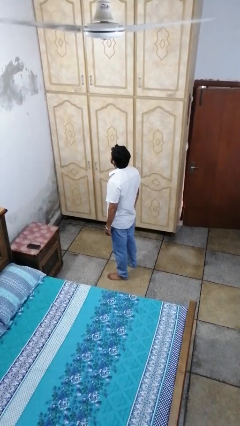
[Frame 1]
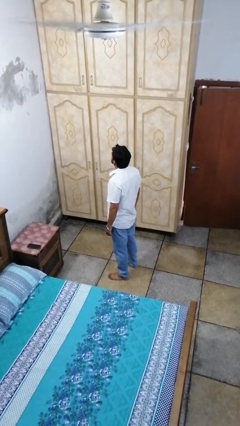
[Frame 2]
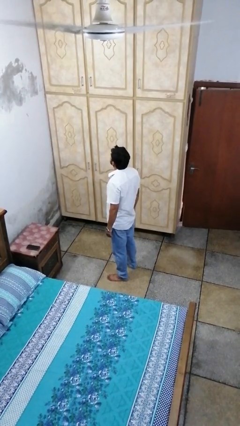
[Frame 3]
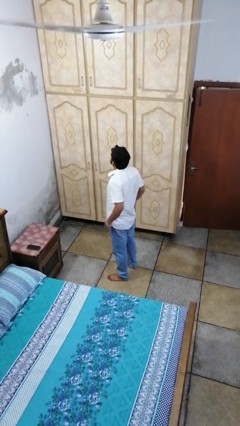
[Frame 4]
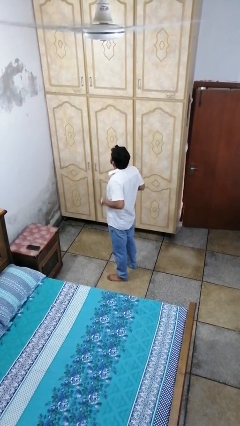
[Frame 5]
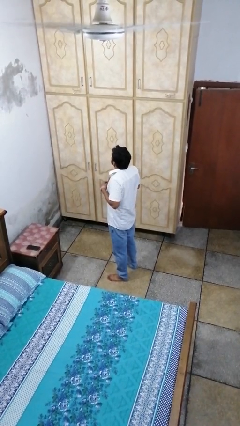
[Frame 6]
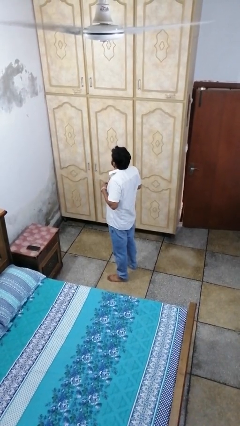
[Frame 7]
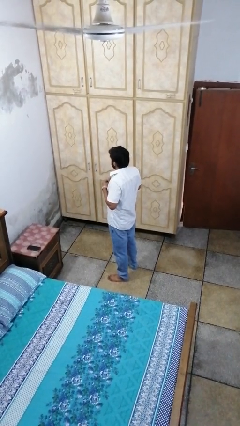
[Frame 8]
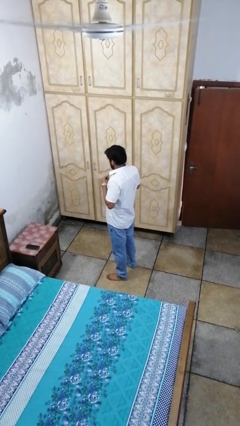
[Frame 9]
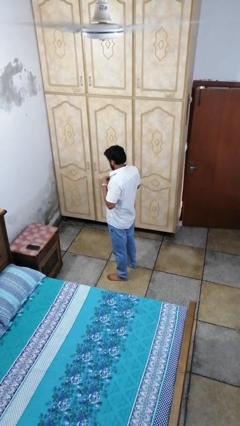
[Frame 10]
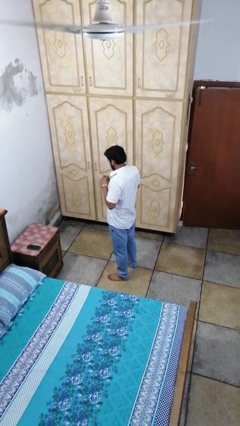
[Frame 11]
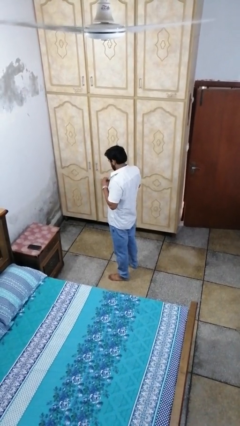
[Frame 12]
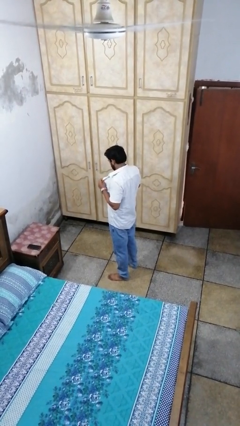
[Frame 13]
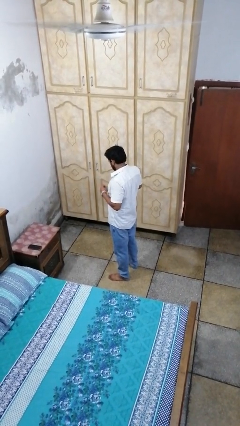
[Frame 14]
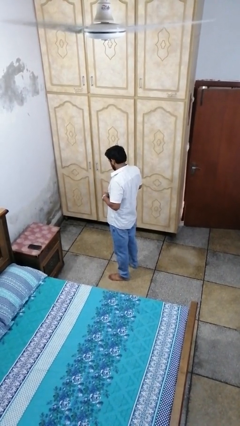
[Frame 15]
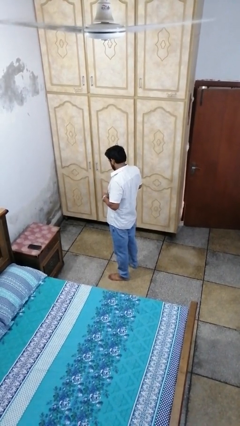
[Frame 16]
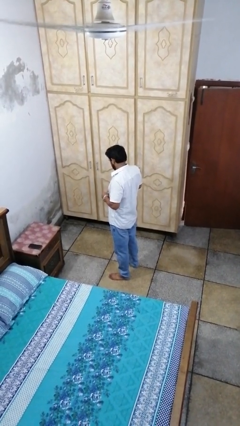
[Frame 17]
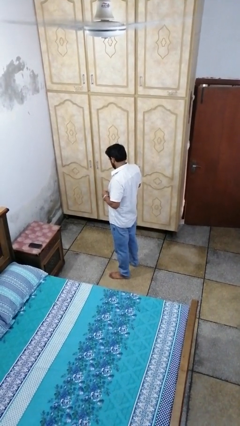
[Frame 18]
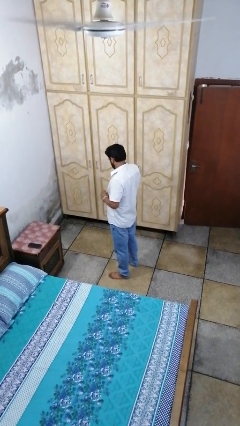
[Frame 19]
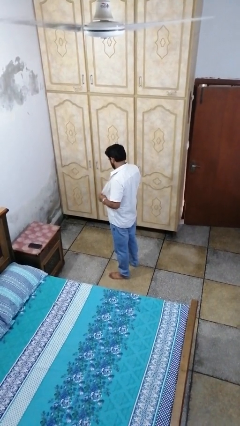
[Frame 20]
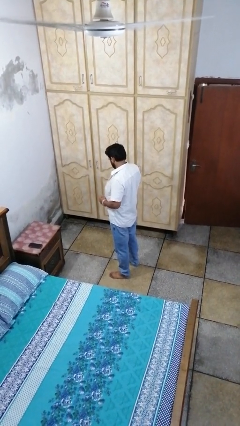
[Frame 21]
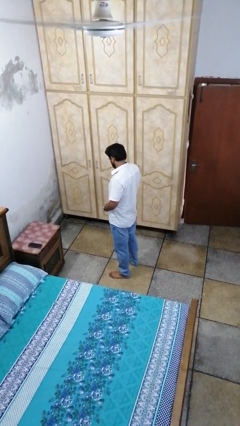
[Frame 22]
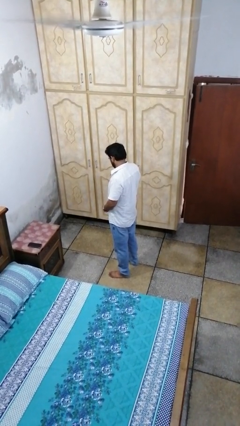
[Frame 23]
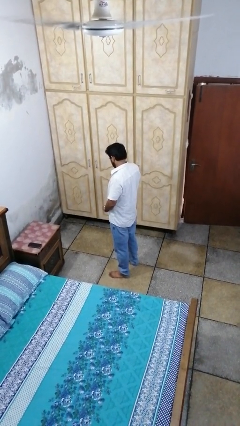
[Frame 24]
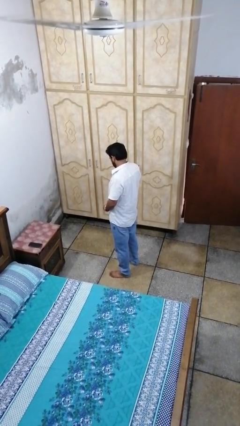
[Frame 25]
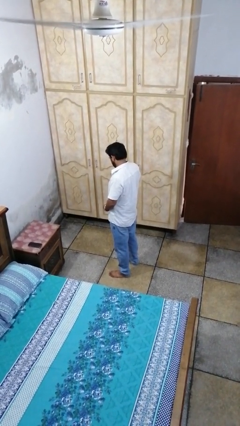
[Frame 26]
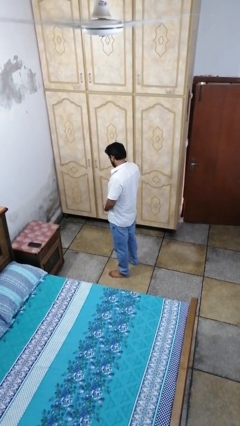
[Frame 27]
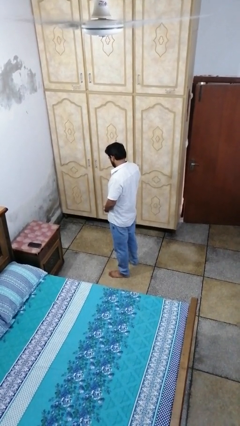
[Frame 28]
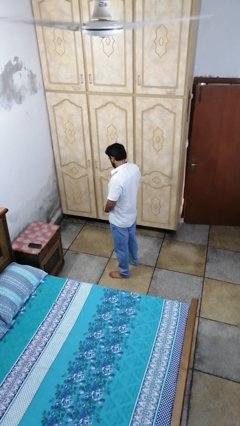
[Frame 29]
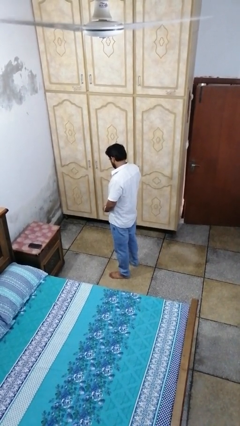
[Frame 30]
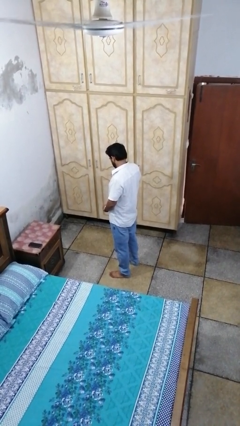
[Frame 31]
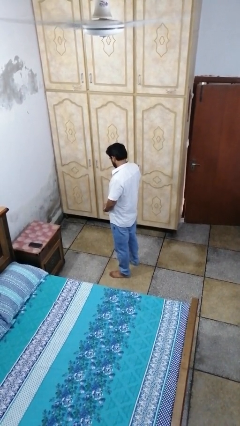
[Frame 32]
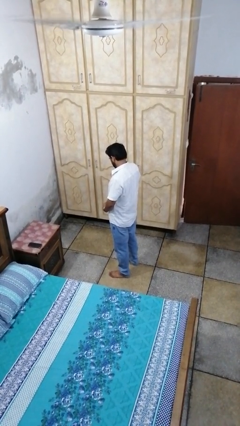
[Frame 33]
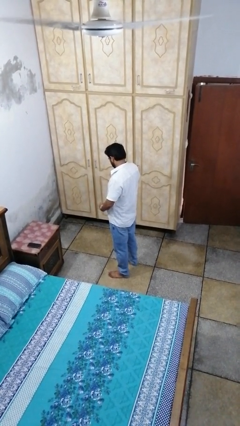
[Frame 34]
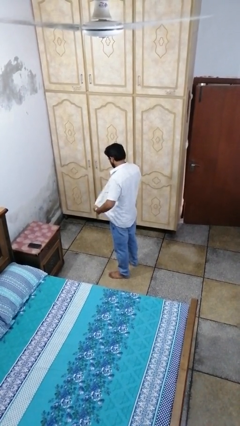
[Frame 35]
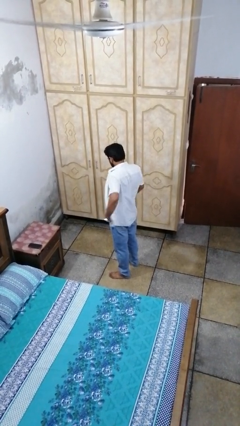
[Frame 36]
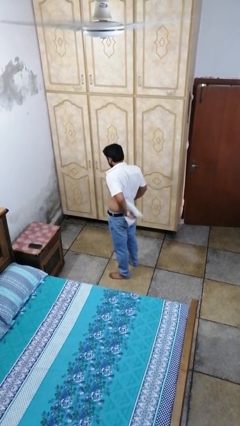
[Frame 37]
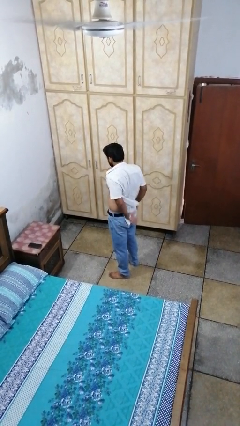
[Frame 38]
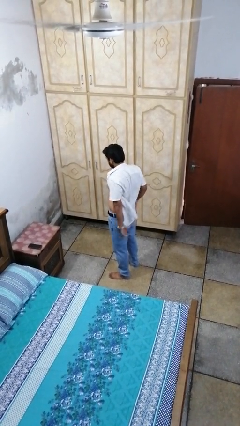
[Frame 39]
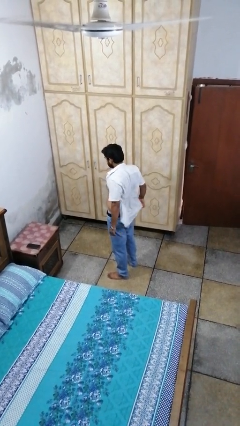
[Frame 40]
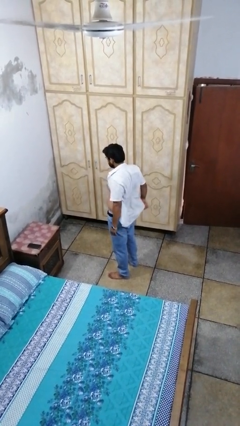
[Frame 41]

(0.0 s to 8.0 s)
person unbuttons shirt

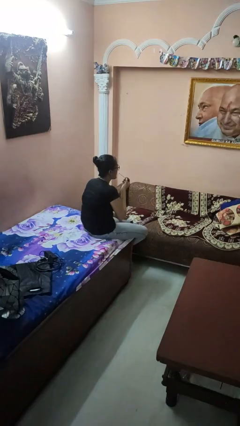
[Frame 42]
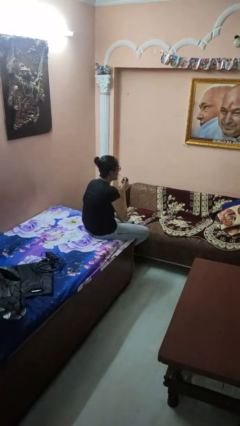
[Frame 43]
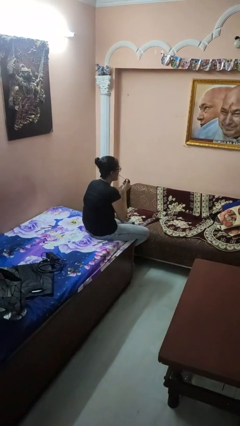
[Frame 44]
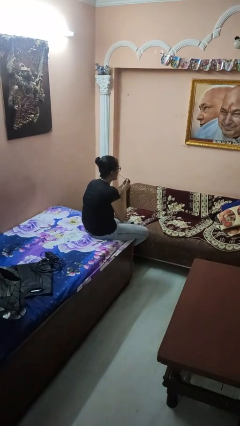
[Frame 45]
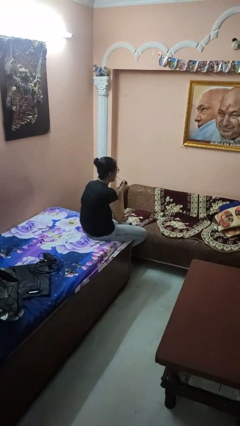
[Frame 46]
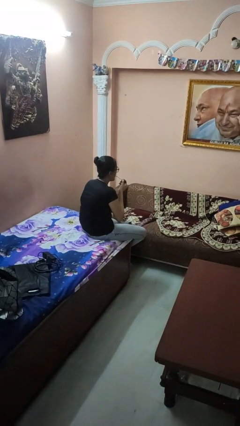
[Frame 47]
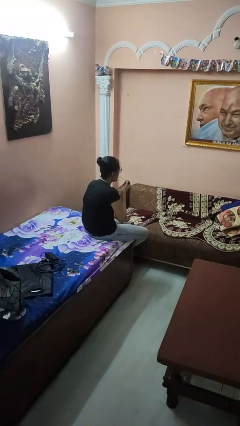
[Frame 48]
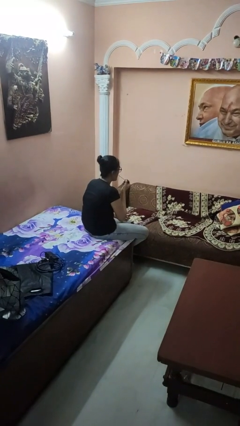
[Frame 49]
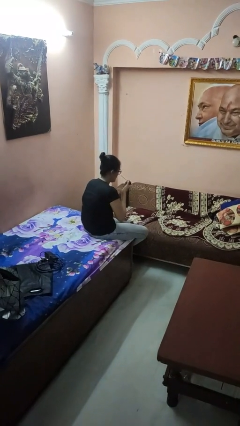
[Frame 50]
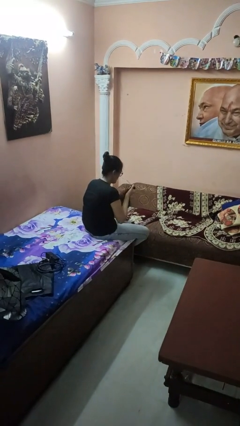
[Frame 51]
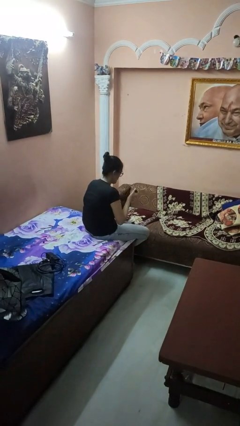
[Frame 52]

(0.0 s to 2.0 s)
person applies lip makeup

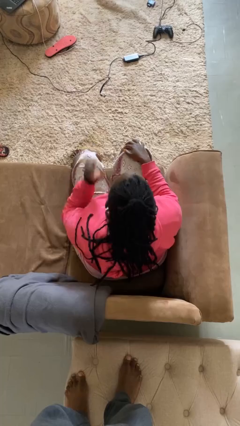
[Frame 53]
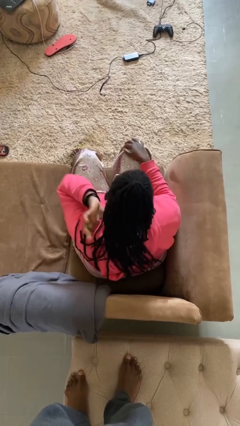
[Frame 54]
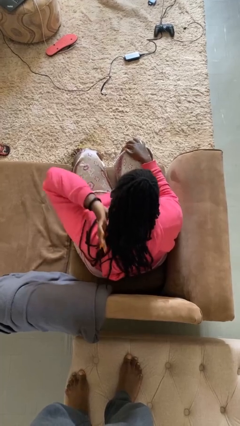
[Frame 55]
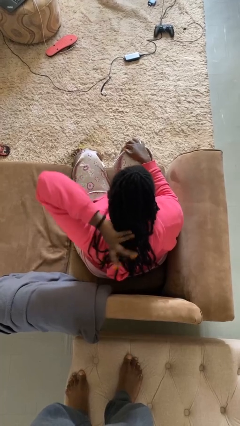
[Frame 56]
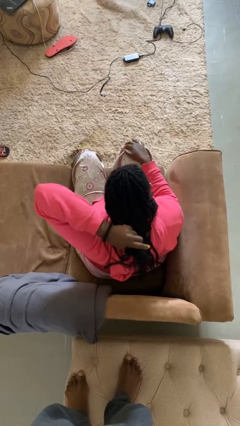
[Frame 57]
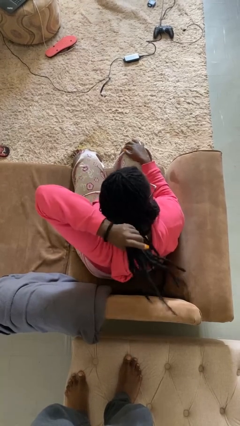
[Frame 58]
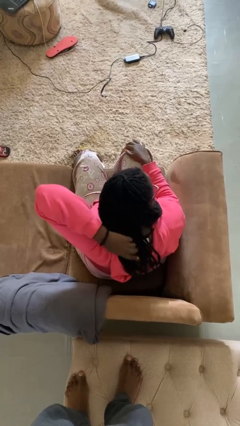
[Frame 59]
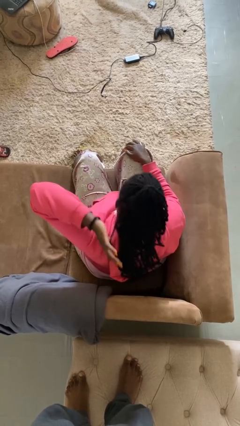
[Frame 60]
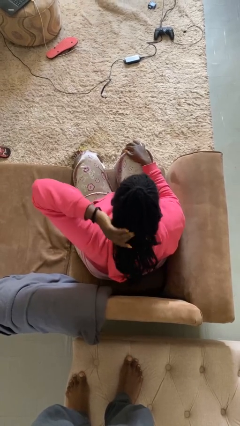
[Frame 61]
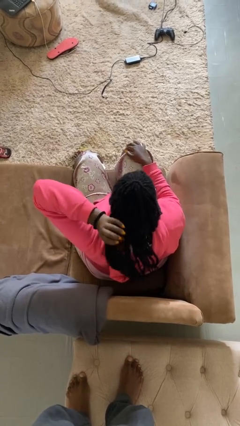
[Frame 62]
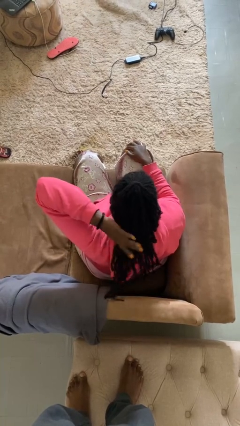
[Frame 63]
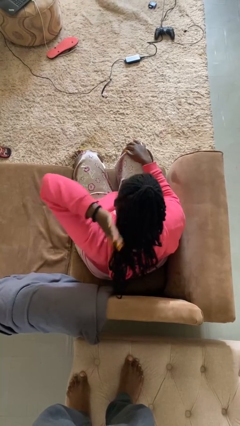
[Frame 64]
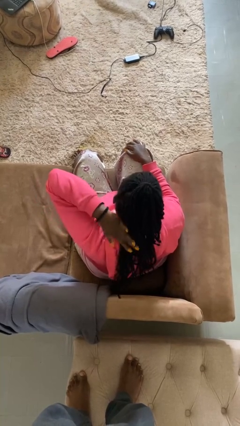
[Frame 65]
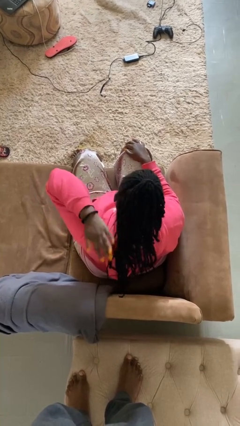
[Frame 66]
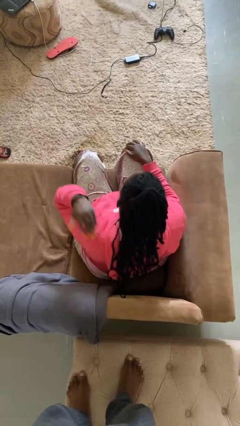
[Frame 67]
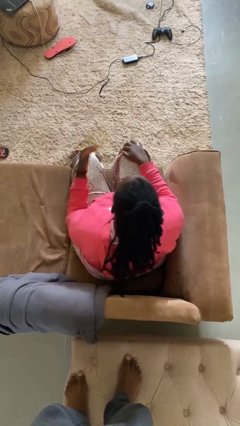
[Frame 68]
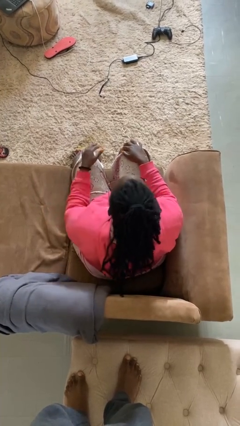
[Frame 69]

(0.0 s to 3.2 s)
person strokes hair

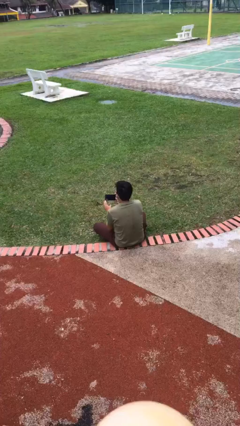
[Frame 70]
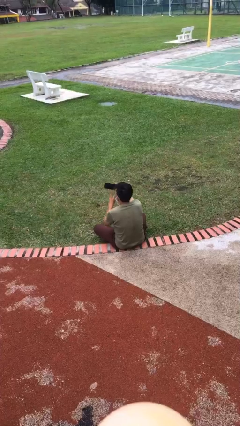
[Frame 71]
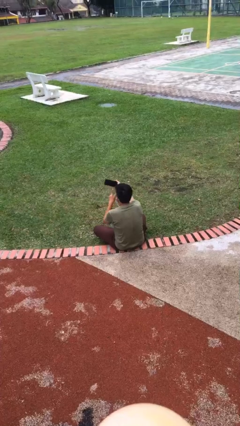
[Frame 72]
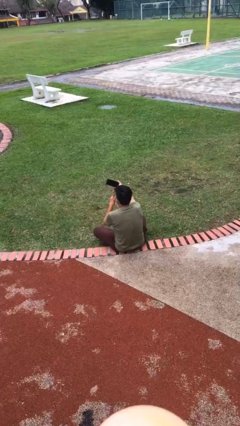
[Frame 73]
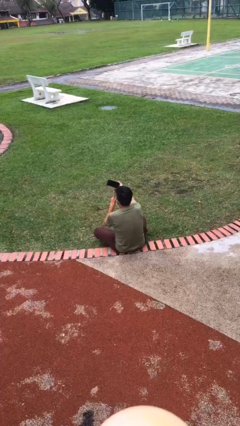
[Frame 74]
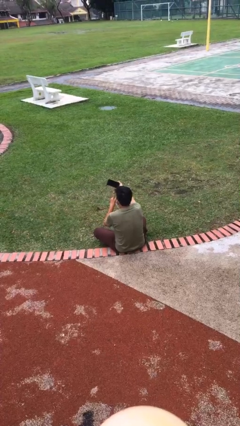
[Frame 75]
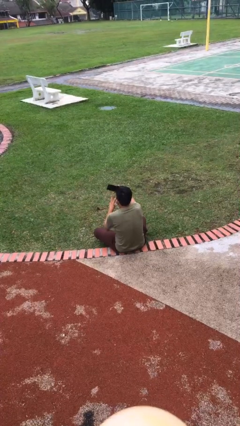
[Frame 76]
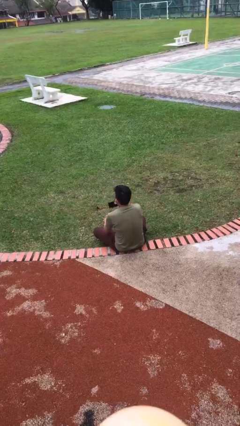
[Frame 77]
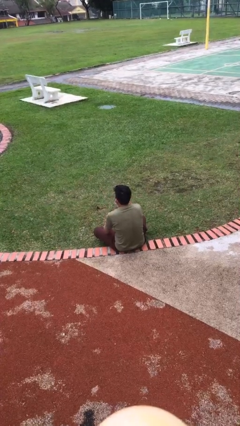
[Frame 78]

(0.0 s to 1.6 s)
person takes selfie

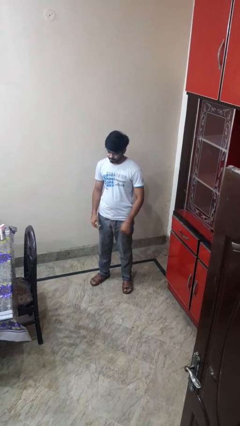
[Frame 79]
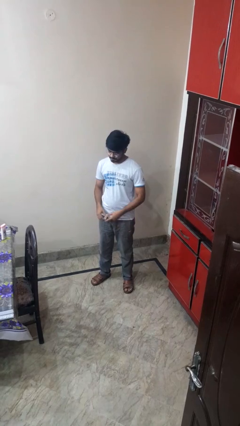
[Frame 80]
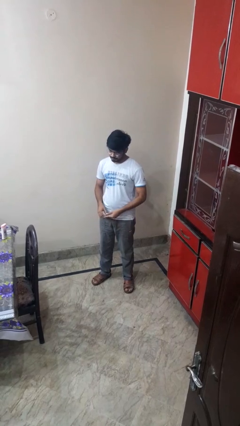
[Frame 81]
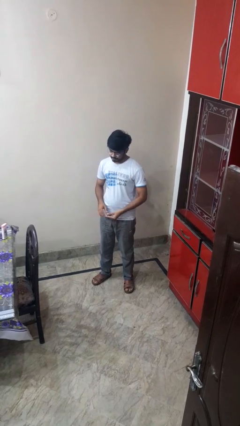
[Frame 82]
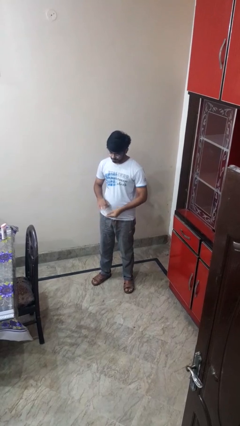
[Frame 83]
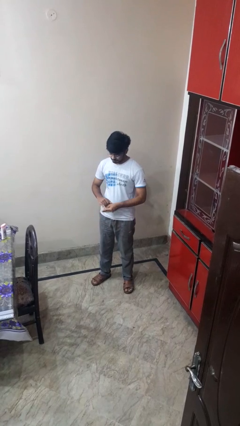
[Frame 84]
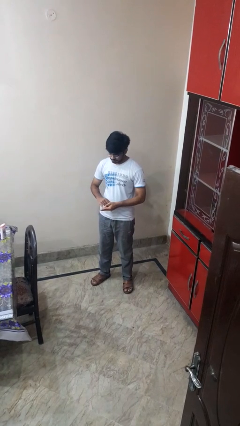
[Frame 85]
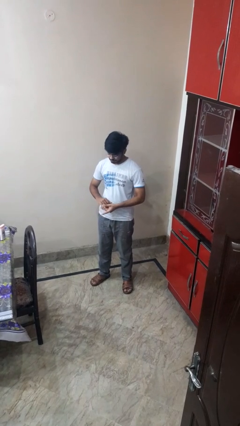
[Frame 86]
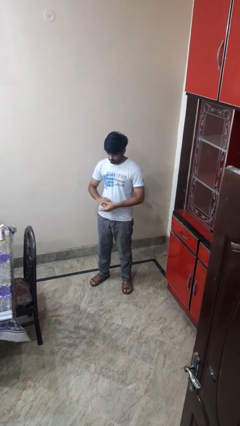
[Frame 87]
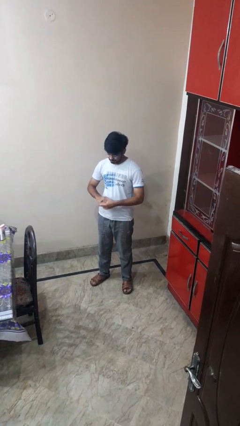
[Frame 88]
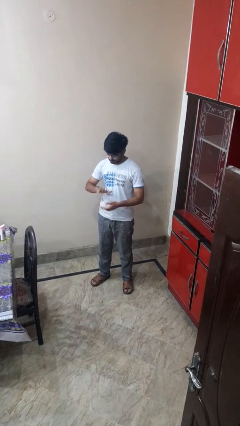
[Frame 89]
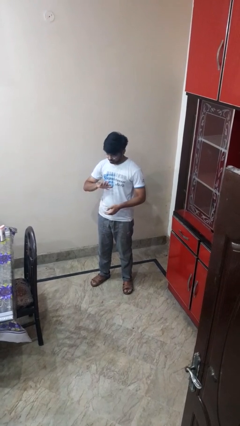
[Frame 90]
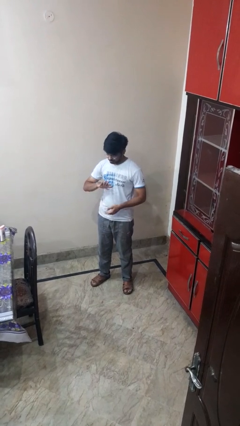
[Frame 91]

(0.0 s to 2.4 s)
person puts on ring

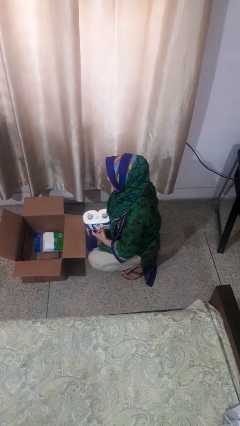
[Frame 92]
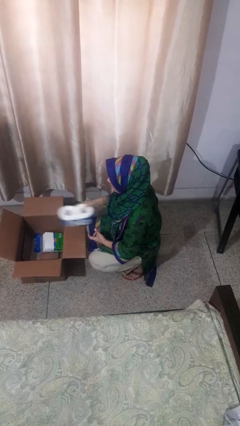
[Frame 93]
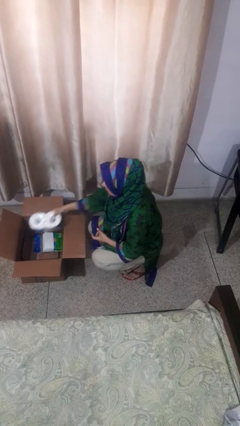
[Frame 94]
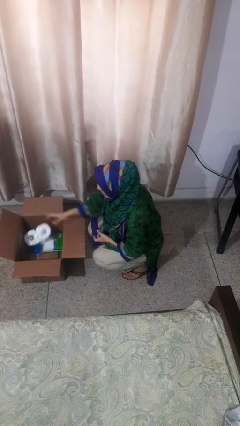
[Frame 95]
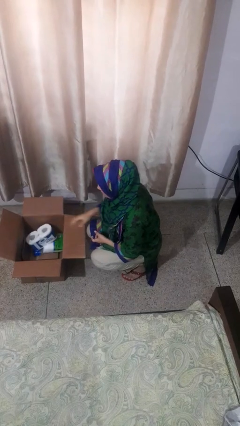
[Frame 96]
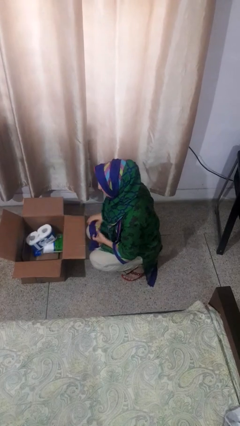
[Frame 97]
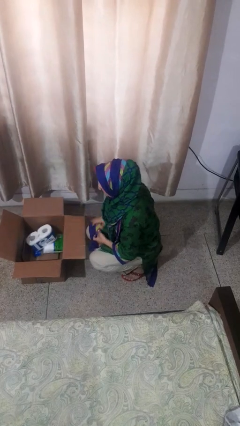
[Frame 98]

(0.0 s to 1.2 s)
person puts object into box
